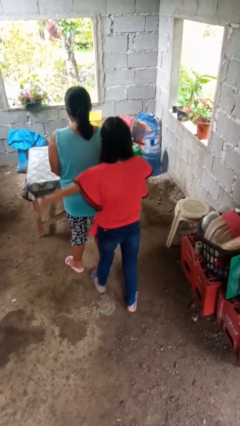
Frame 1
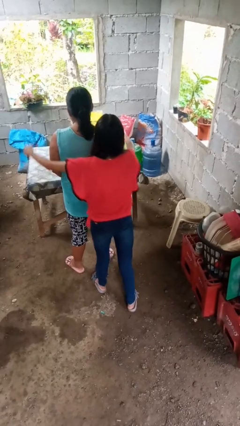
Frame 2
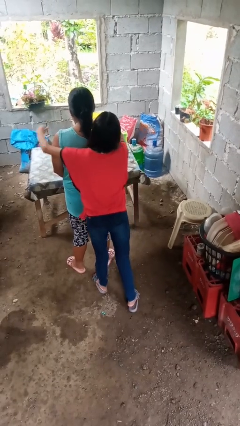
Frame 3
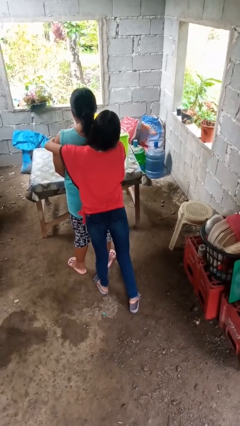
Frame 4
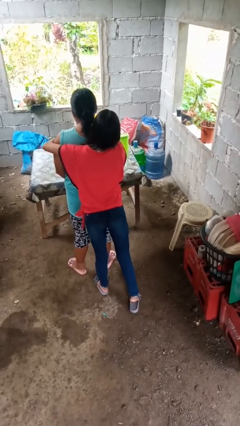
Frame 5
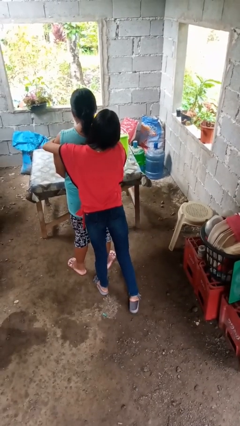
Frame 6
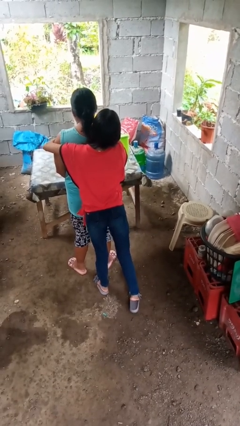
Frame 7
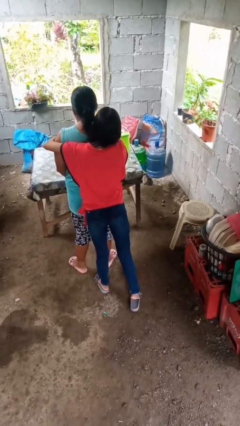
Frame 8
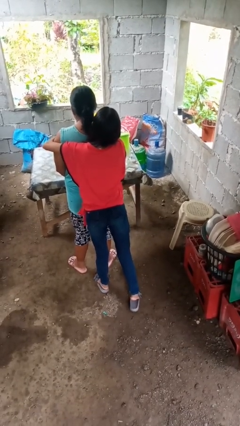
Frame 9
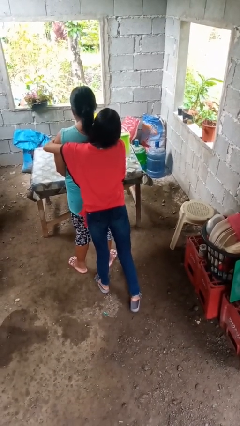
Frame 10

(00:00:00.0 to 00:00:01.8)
person hugs person from behind

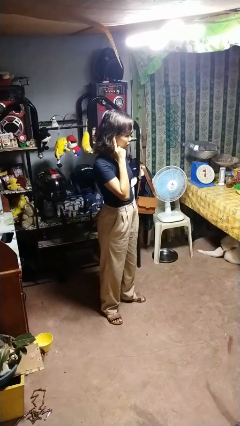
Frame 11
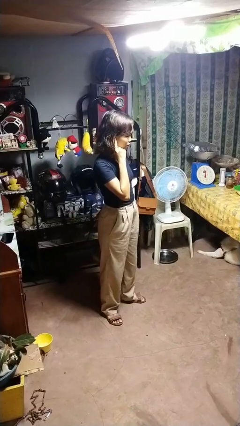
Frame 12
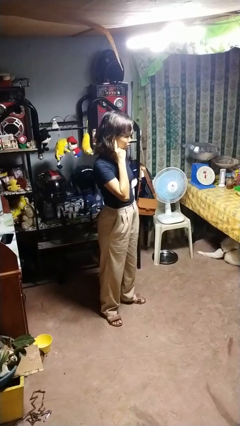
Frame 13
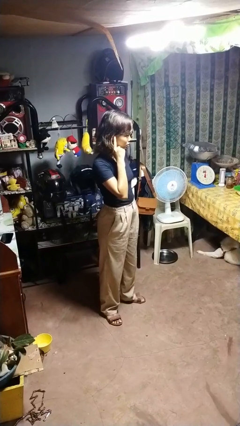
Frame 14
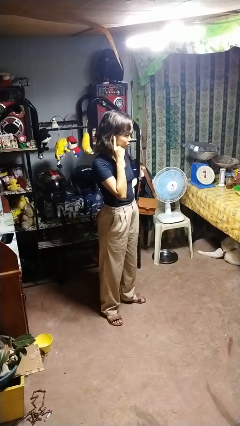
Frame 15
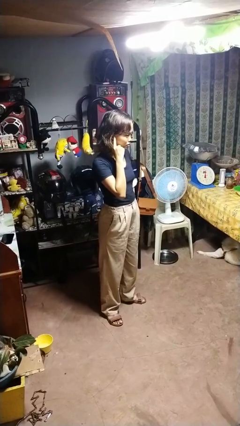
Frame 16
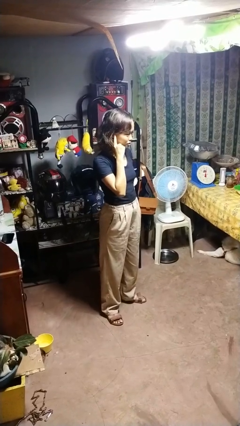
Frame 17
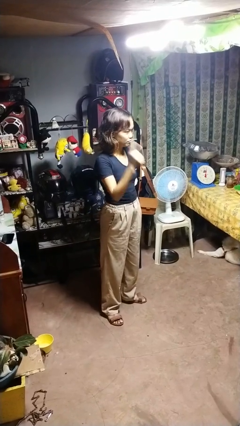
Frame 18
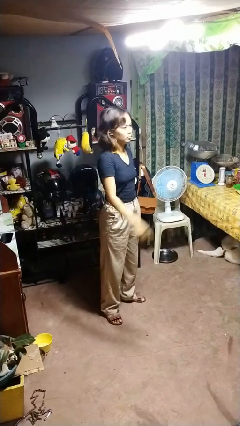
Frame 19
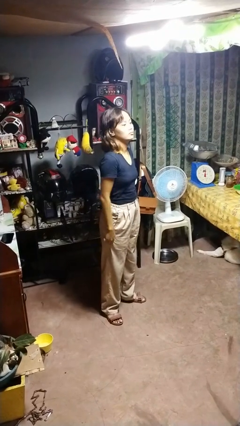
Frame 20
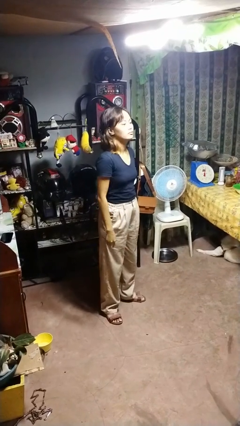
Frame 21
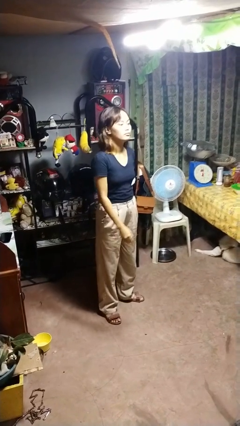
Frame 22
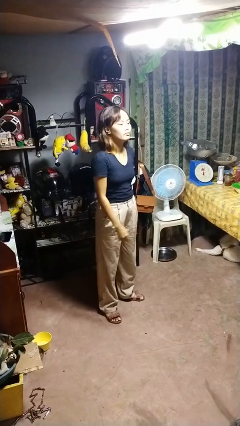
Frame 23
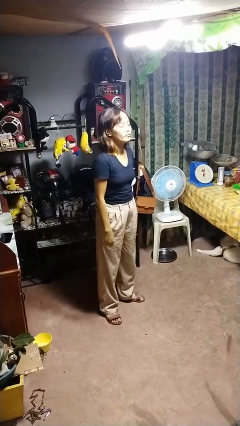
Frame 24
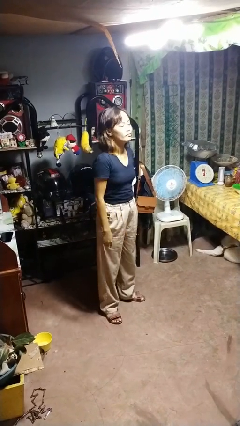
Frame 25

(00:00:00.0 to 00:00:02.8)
person gestures listen closely

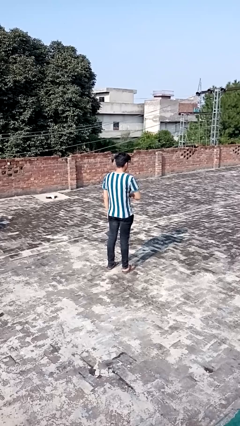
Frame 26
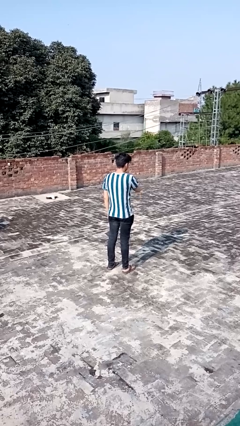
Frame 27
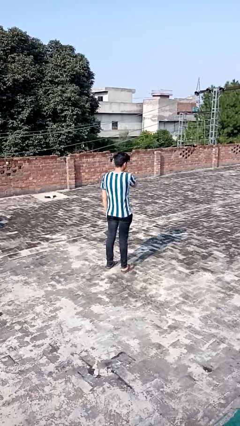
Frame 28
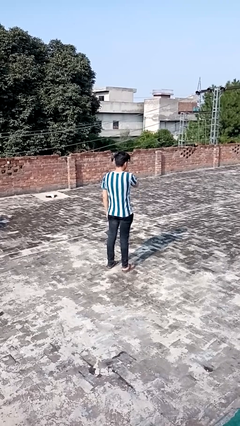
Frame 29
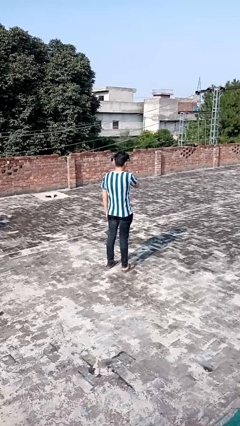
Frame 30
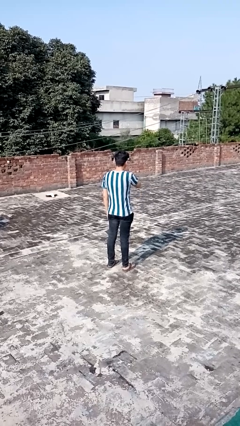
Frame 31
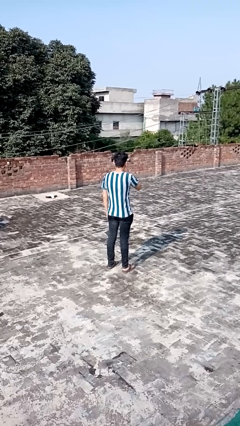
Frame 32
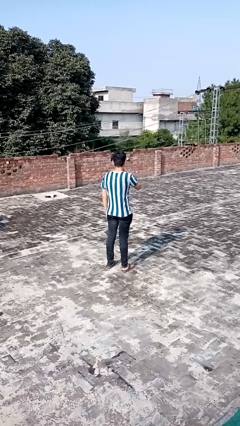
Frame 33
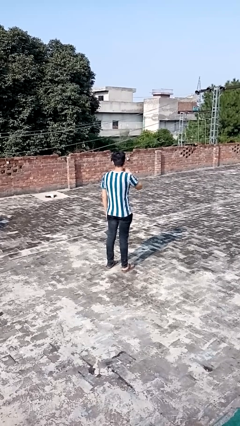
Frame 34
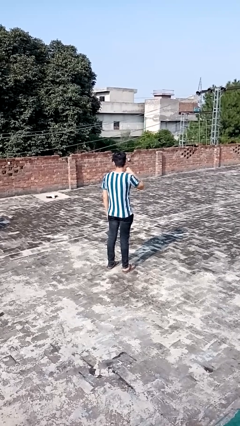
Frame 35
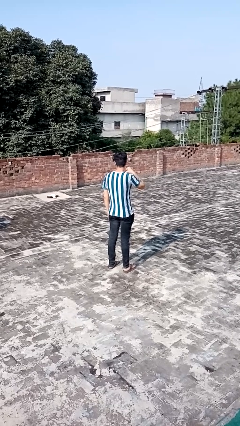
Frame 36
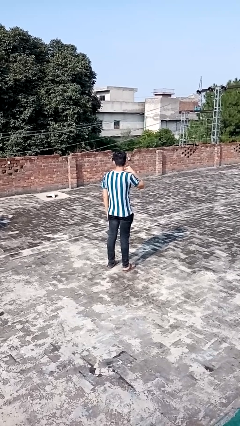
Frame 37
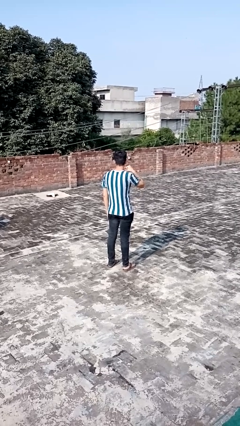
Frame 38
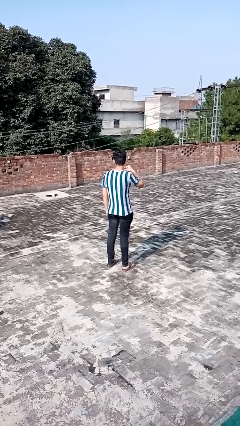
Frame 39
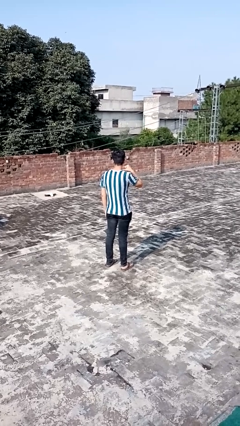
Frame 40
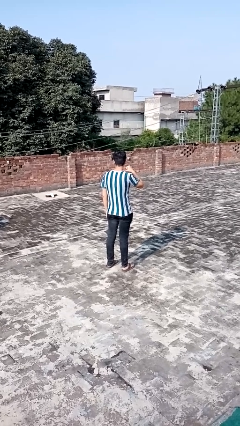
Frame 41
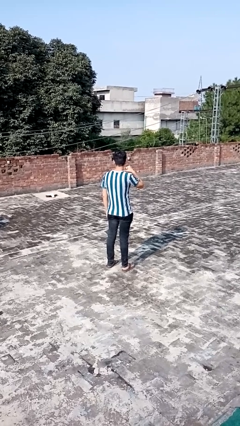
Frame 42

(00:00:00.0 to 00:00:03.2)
person gestures cut

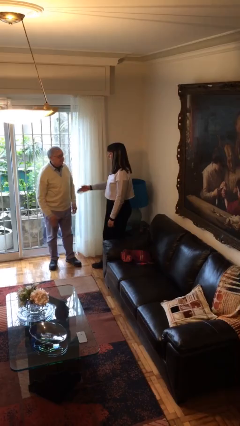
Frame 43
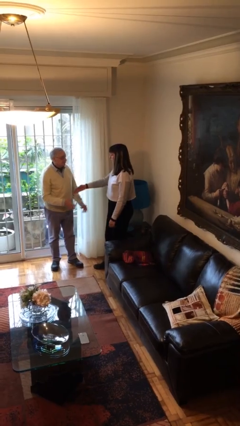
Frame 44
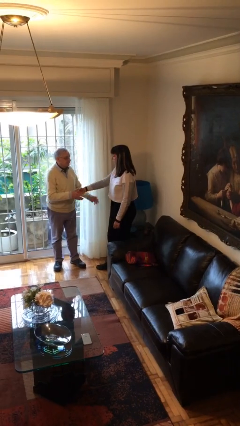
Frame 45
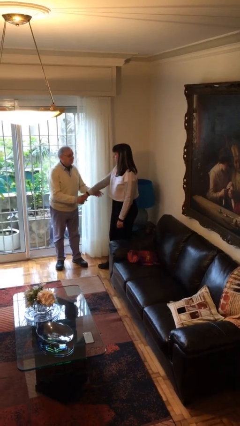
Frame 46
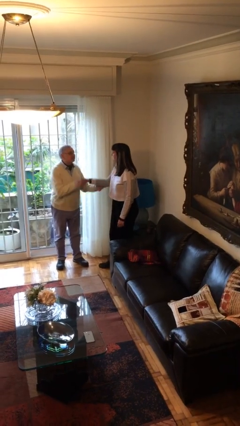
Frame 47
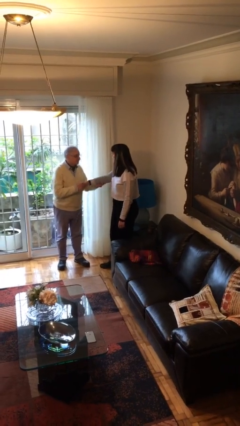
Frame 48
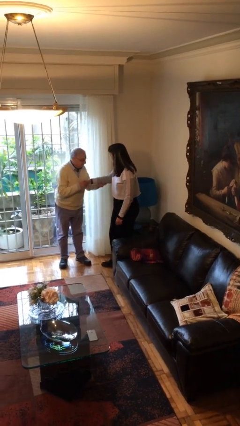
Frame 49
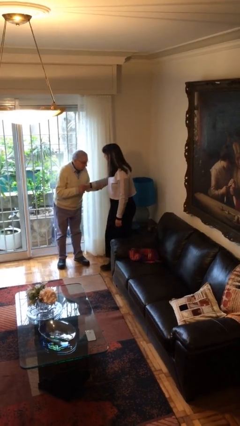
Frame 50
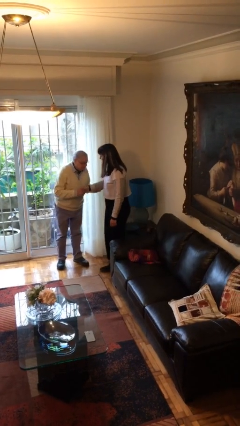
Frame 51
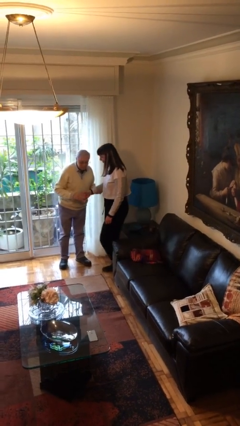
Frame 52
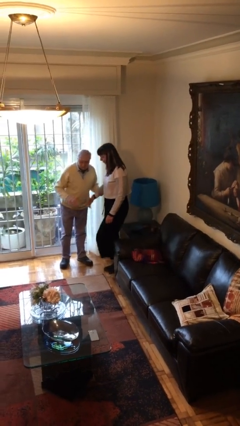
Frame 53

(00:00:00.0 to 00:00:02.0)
person shakes hand

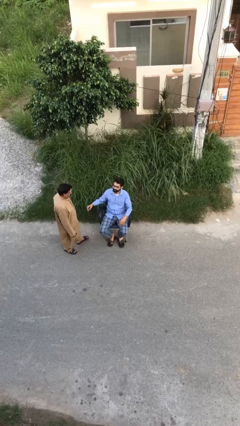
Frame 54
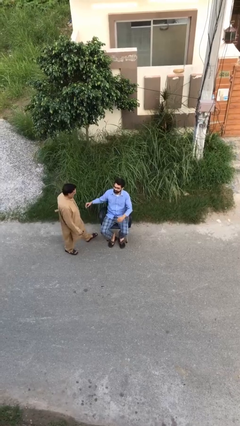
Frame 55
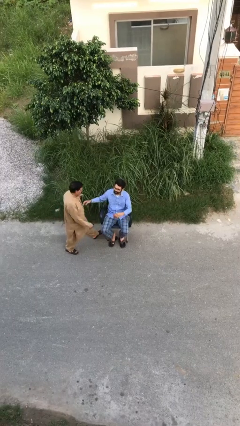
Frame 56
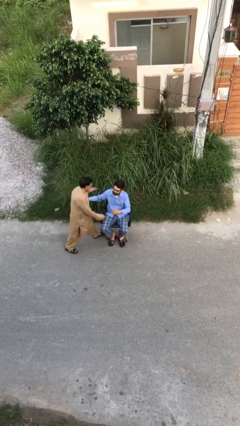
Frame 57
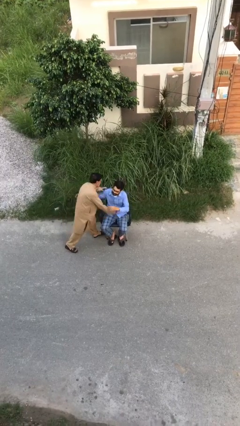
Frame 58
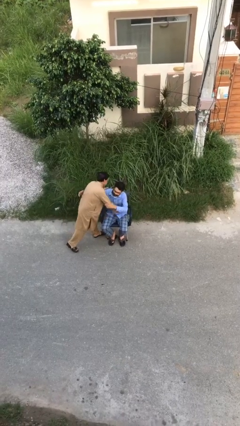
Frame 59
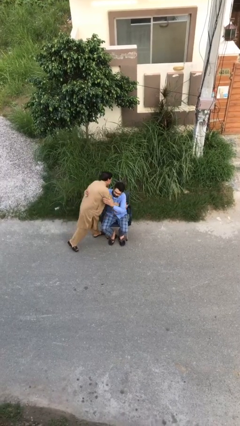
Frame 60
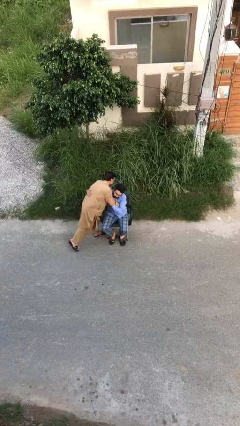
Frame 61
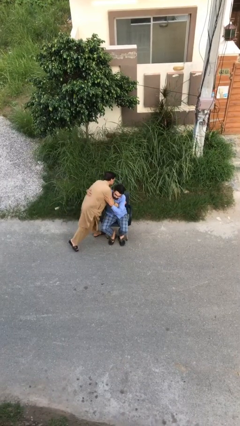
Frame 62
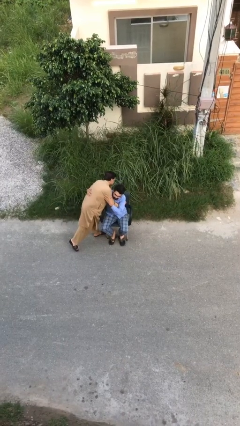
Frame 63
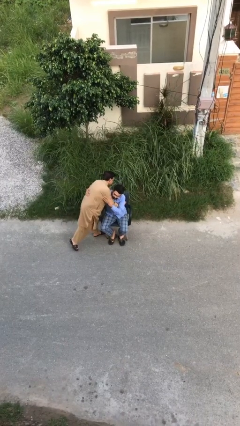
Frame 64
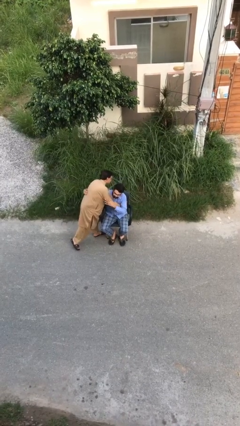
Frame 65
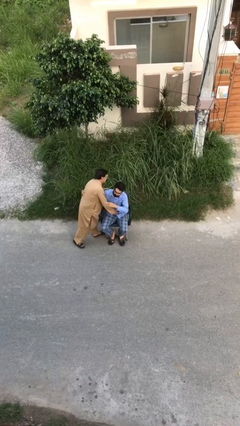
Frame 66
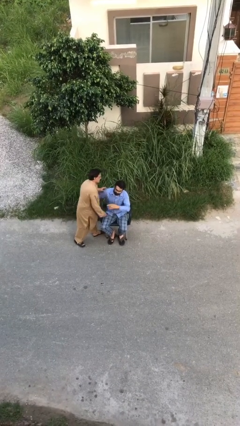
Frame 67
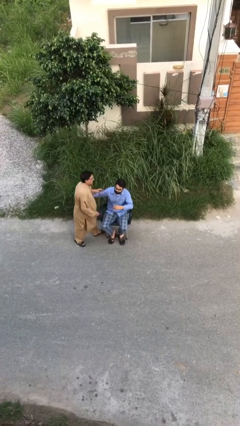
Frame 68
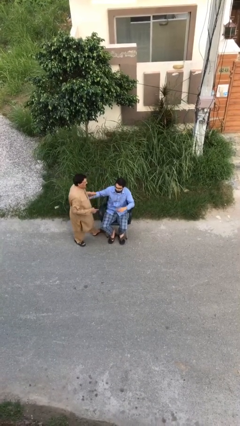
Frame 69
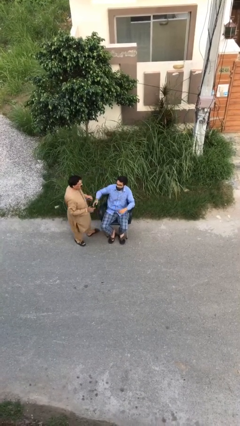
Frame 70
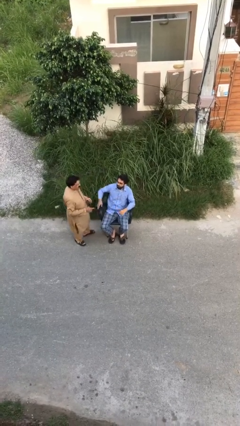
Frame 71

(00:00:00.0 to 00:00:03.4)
person embraces person

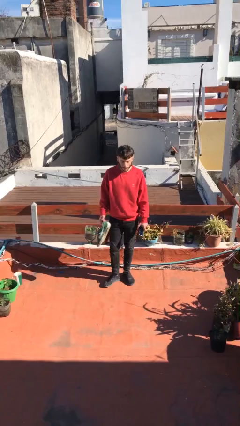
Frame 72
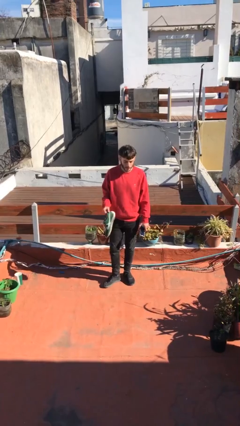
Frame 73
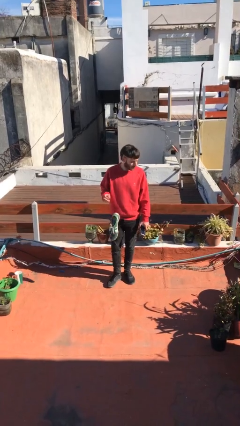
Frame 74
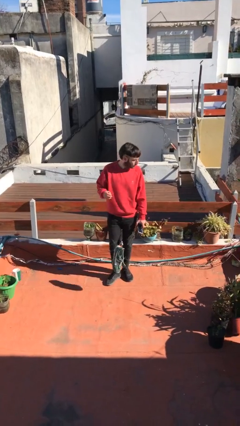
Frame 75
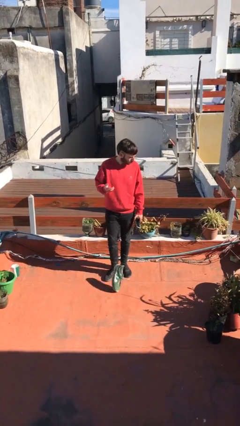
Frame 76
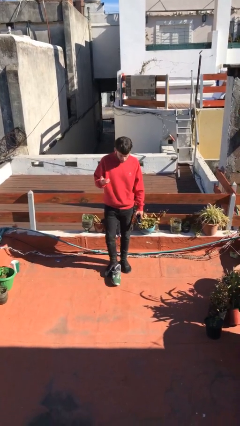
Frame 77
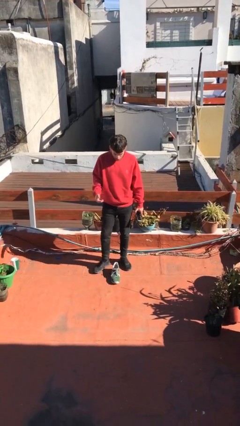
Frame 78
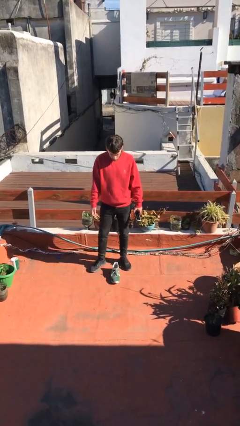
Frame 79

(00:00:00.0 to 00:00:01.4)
person drops object

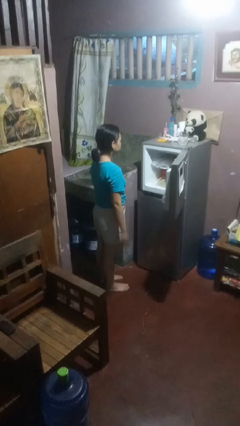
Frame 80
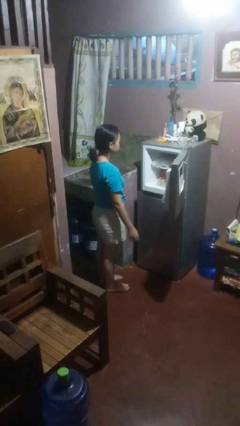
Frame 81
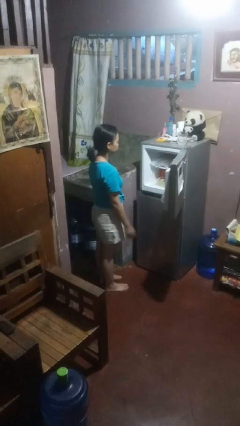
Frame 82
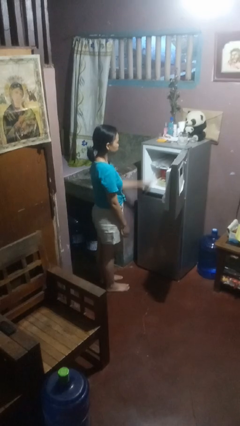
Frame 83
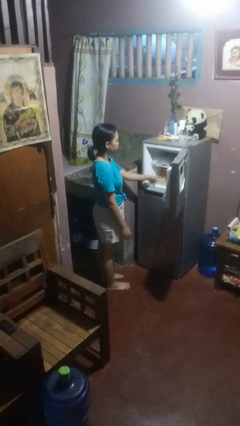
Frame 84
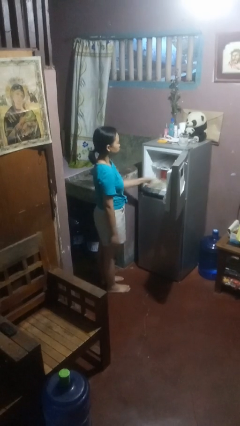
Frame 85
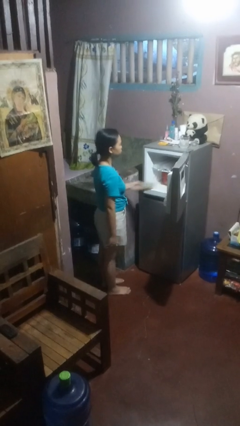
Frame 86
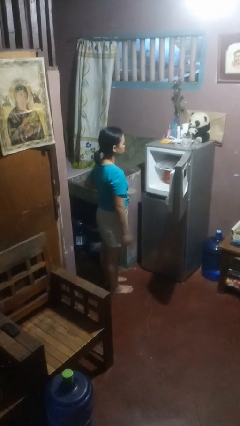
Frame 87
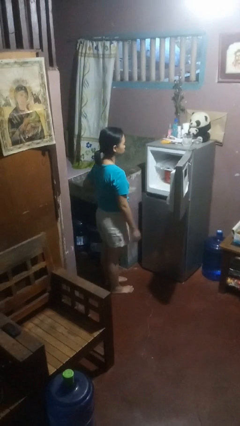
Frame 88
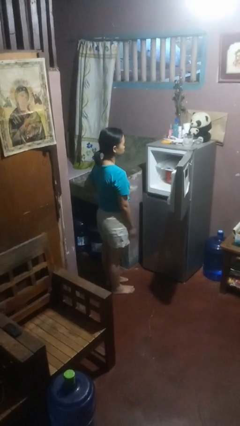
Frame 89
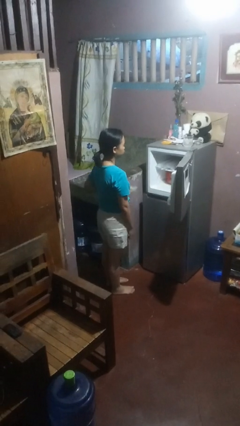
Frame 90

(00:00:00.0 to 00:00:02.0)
person takes object from refrigerator

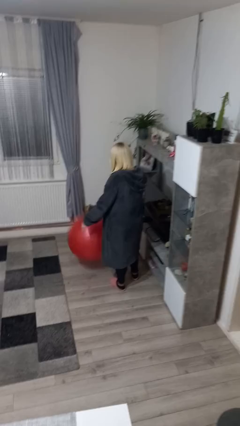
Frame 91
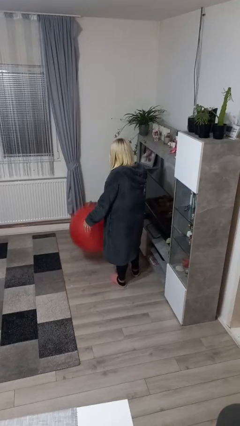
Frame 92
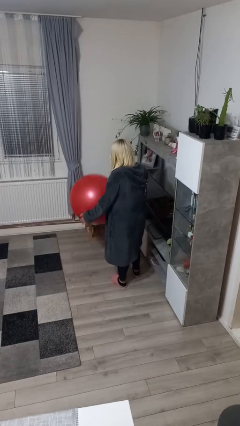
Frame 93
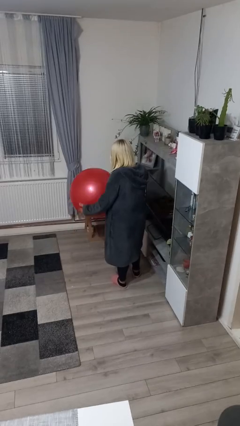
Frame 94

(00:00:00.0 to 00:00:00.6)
person bounces ball on floor
